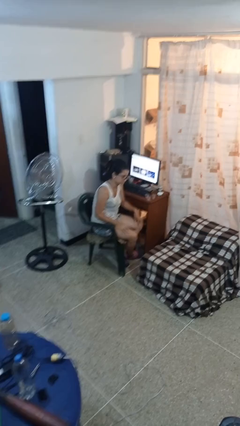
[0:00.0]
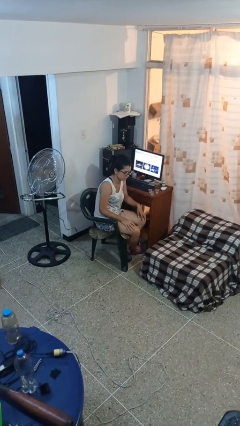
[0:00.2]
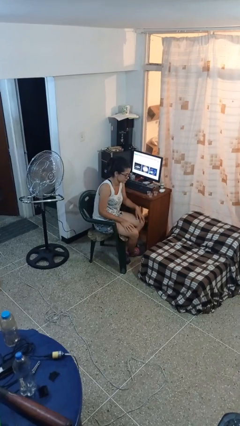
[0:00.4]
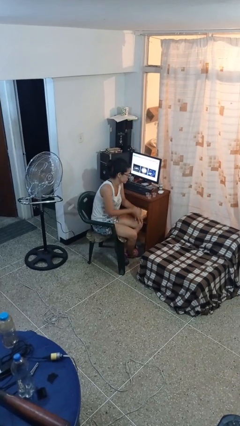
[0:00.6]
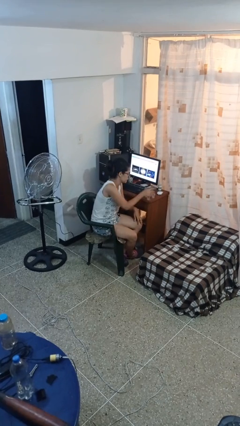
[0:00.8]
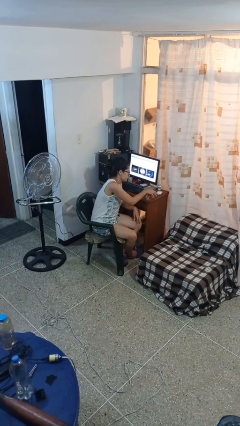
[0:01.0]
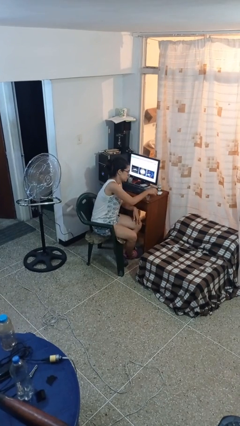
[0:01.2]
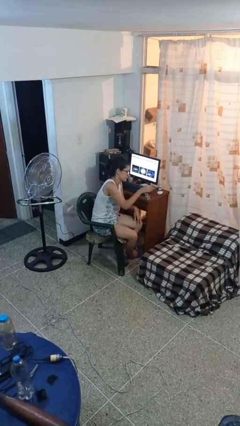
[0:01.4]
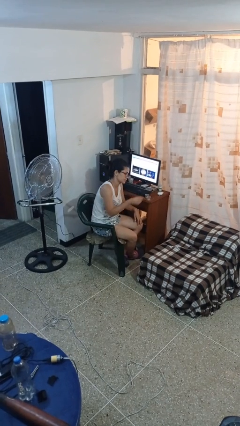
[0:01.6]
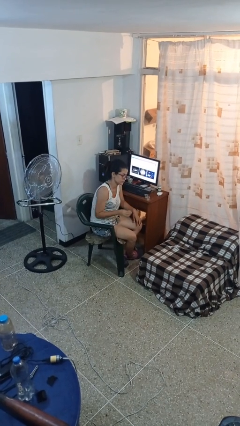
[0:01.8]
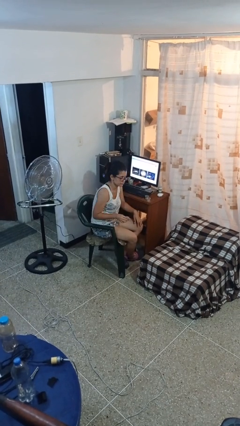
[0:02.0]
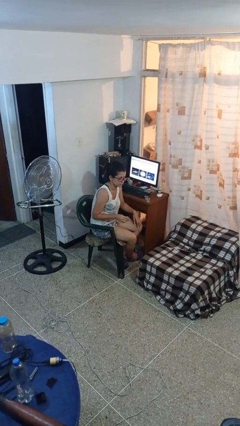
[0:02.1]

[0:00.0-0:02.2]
person picks up object from table

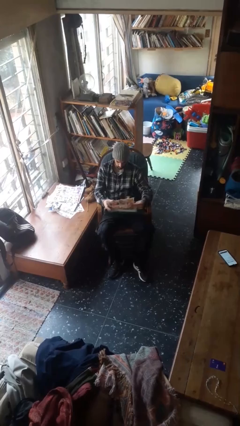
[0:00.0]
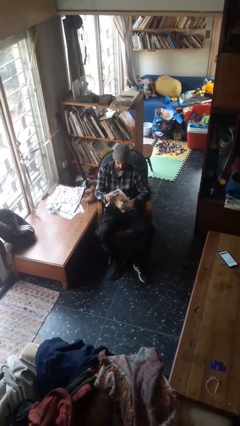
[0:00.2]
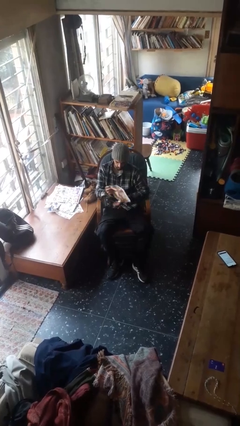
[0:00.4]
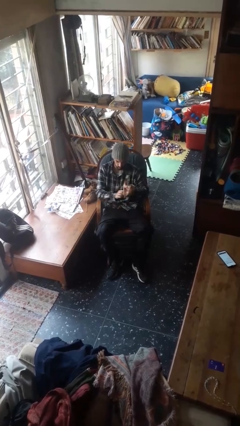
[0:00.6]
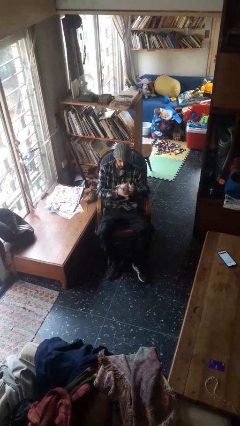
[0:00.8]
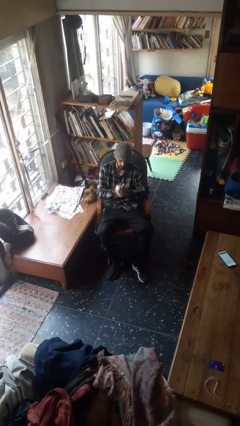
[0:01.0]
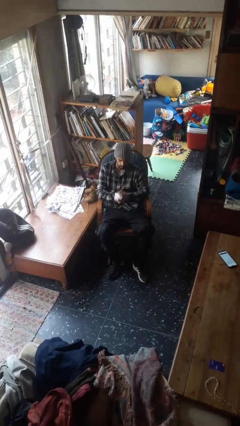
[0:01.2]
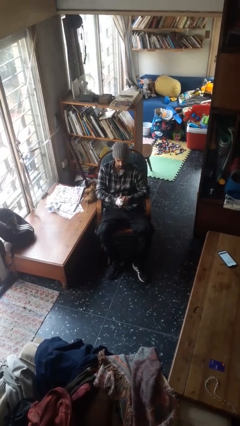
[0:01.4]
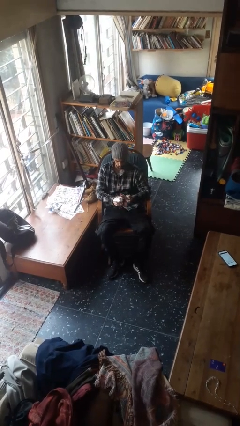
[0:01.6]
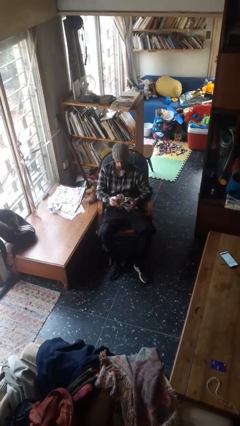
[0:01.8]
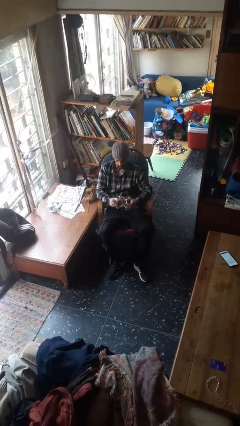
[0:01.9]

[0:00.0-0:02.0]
person crumples paper

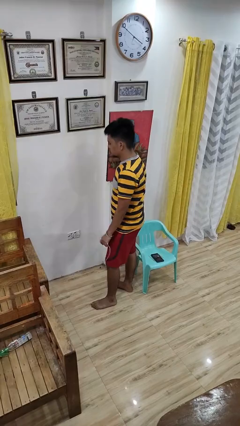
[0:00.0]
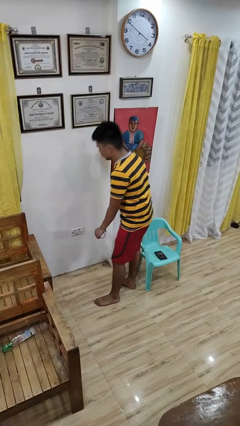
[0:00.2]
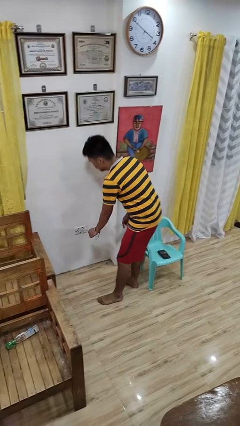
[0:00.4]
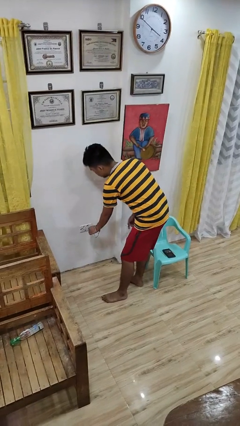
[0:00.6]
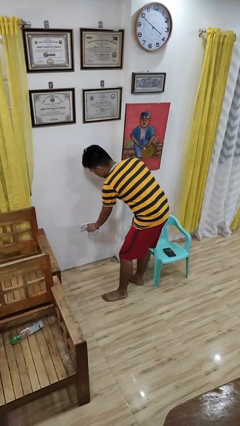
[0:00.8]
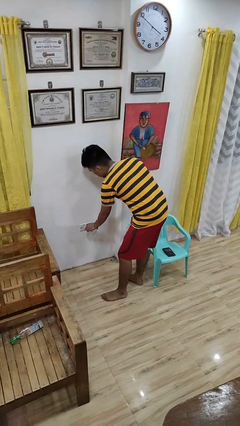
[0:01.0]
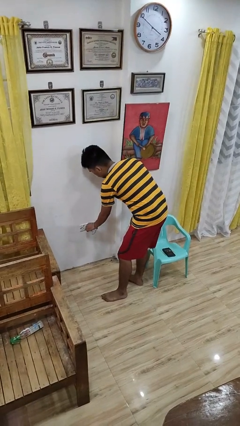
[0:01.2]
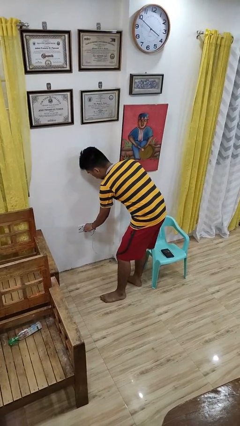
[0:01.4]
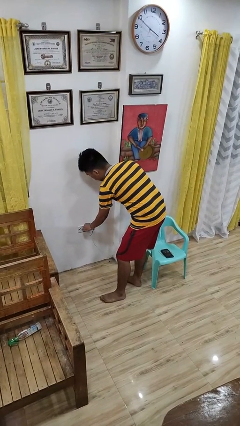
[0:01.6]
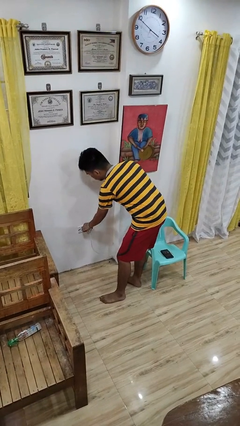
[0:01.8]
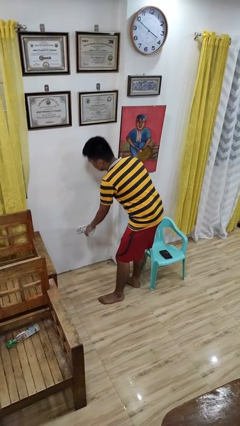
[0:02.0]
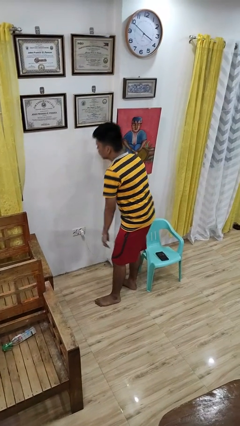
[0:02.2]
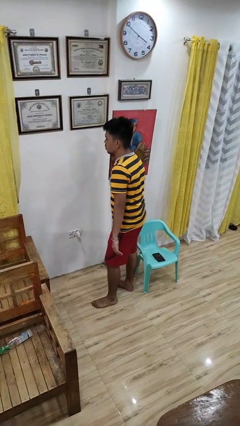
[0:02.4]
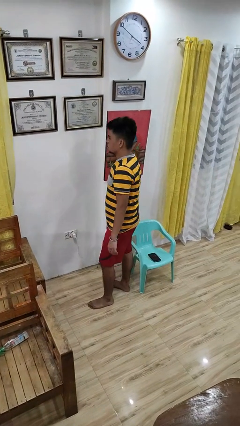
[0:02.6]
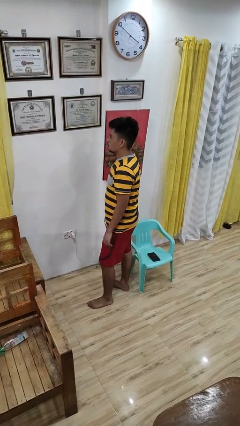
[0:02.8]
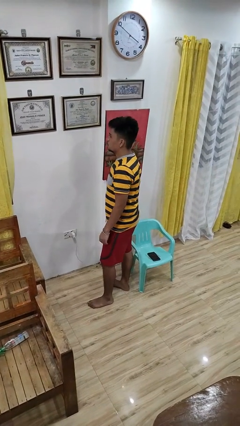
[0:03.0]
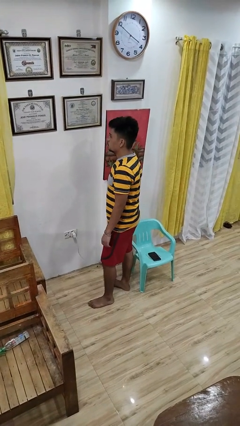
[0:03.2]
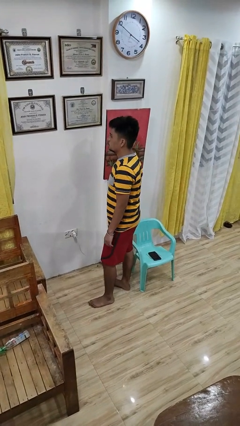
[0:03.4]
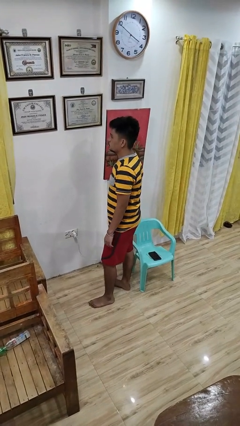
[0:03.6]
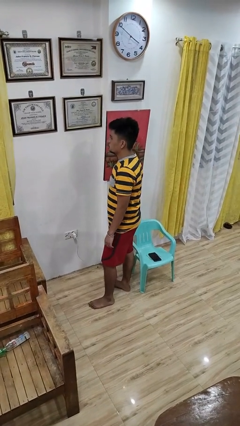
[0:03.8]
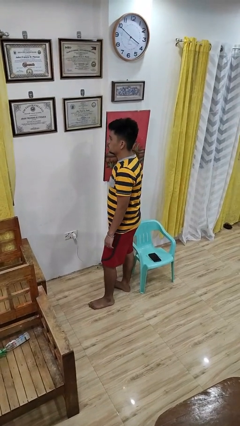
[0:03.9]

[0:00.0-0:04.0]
person plugs into electrical socket

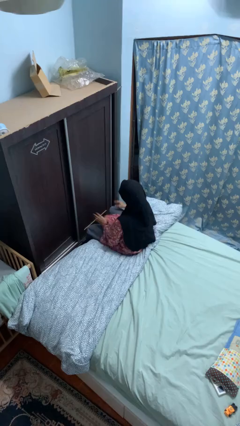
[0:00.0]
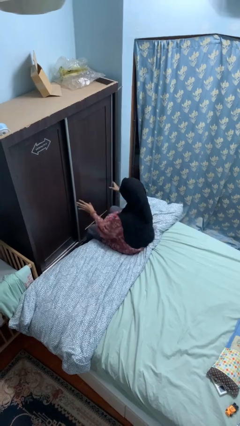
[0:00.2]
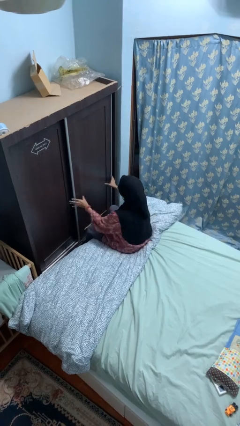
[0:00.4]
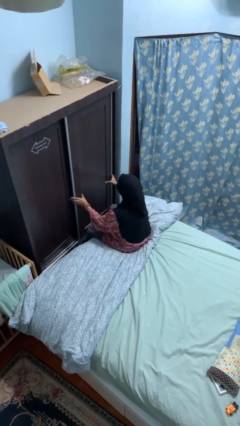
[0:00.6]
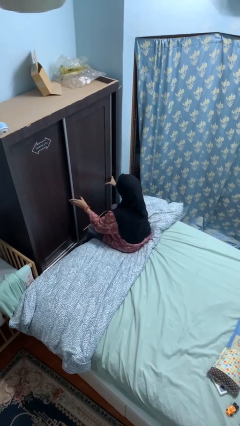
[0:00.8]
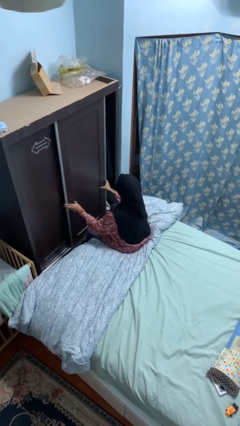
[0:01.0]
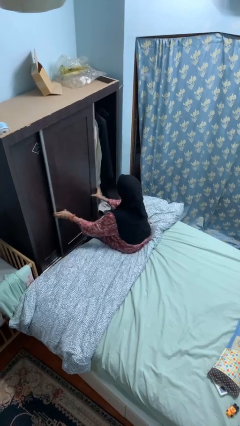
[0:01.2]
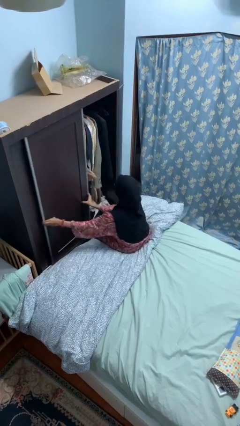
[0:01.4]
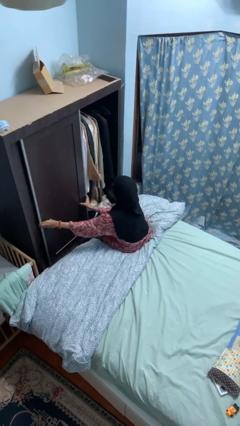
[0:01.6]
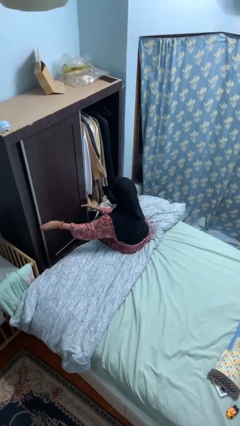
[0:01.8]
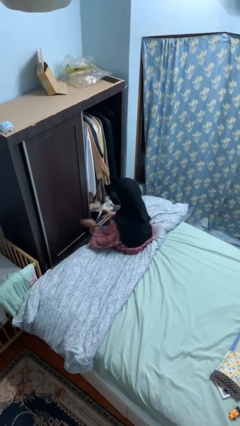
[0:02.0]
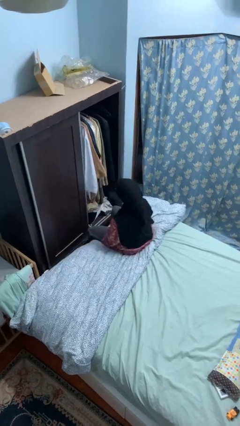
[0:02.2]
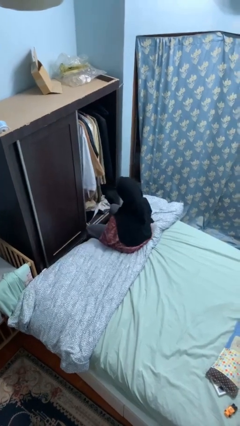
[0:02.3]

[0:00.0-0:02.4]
person opens closet door

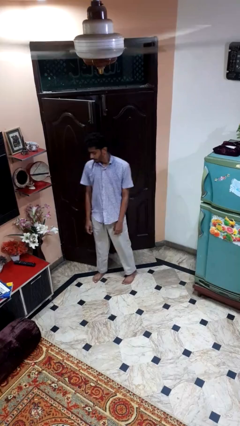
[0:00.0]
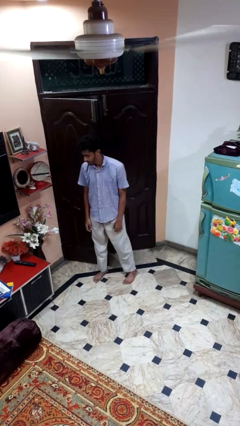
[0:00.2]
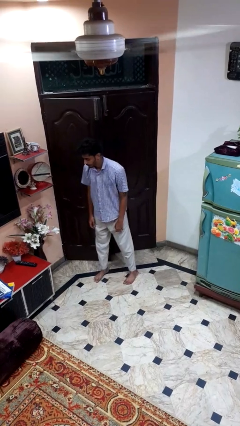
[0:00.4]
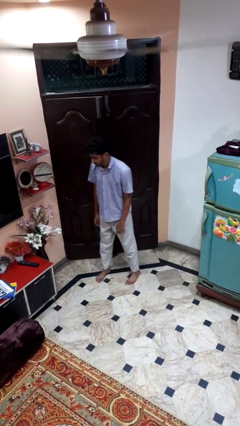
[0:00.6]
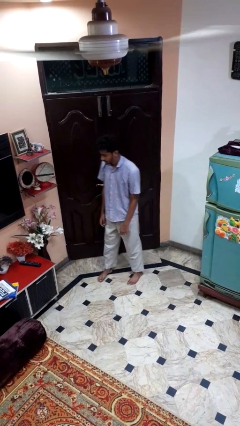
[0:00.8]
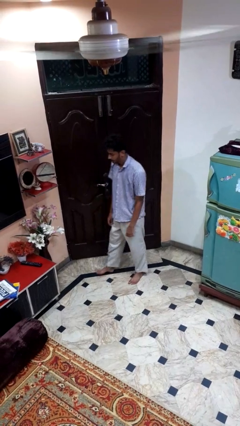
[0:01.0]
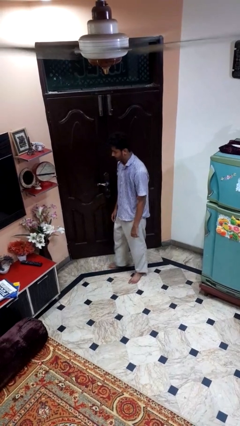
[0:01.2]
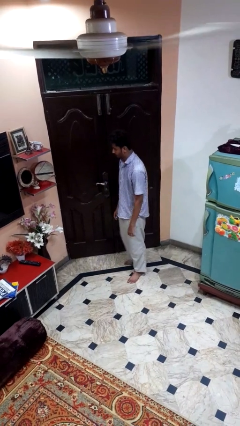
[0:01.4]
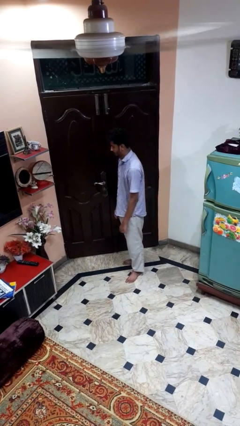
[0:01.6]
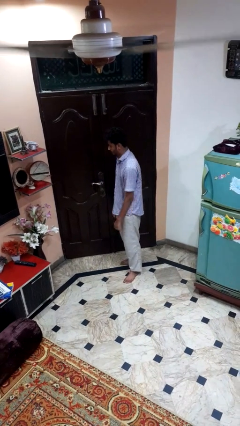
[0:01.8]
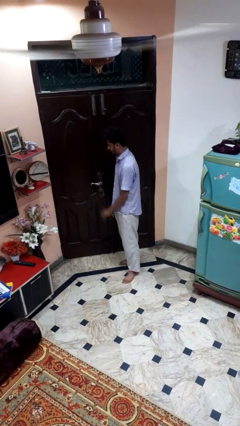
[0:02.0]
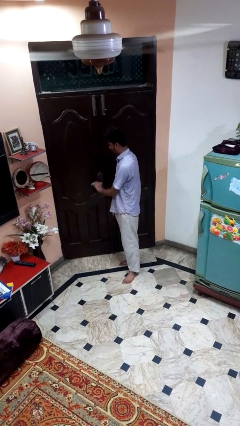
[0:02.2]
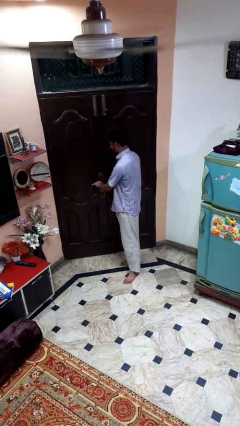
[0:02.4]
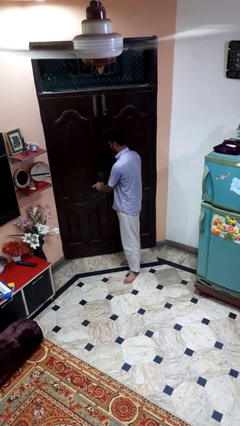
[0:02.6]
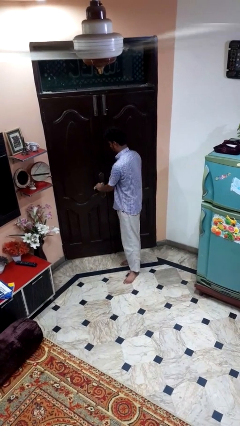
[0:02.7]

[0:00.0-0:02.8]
person closes door with hip

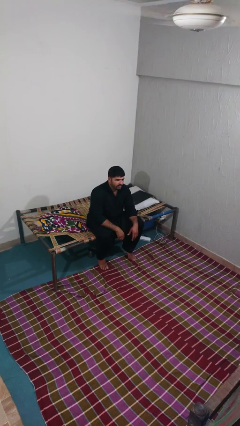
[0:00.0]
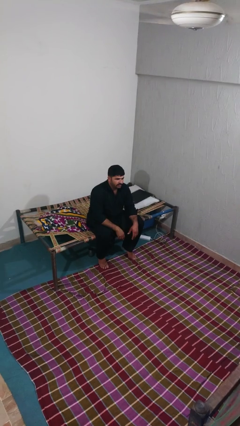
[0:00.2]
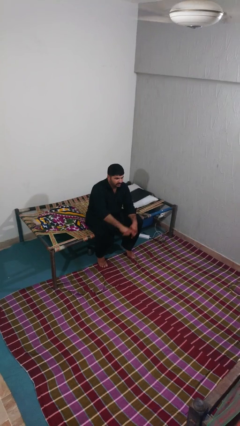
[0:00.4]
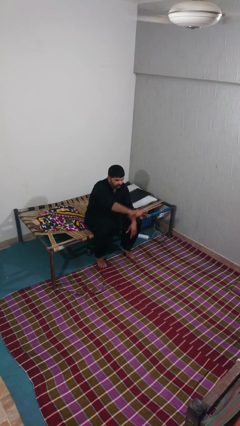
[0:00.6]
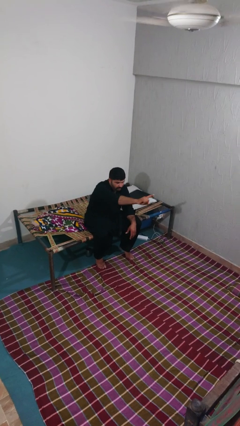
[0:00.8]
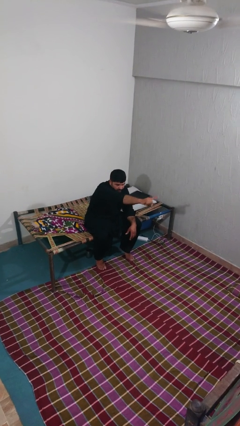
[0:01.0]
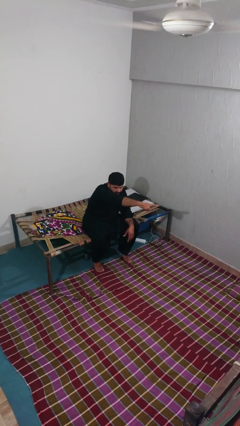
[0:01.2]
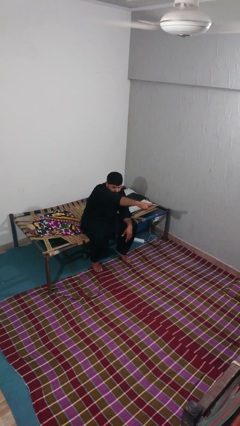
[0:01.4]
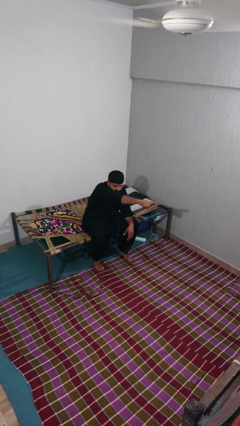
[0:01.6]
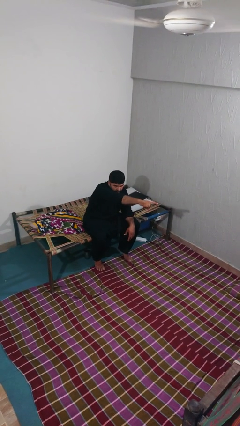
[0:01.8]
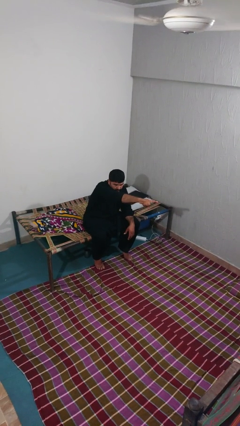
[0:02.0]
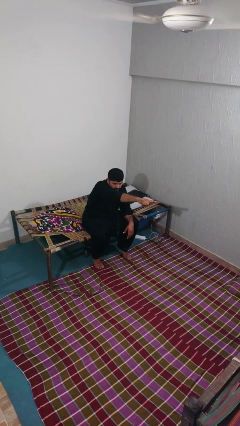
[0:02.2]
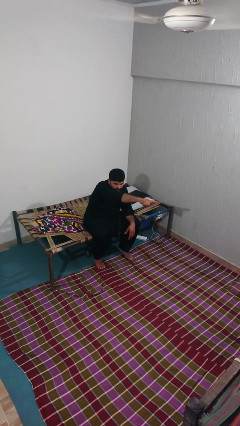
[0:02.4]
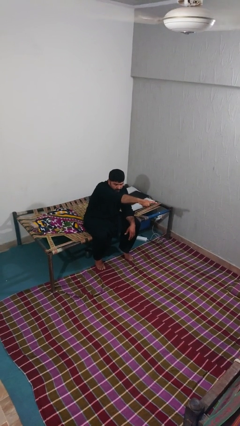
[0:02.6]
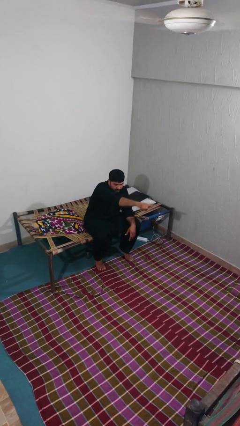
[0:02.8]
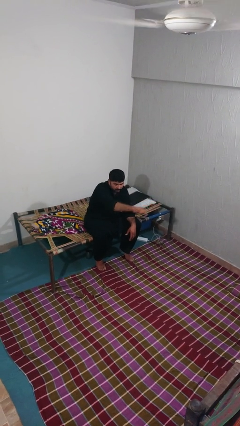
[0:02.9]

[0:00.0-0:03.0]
person points at person

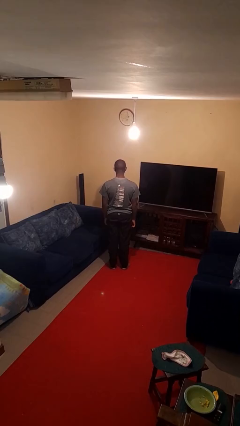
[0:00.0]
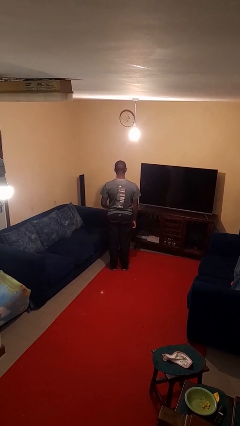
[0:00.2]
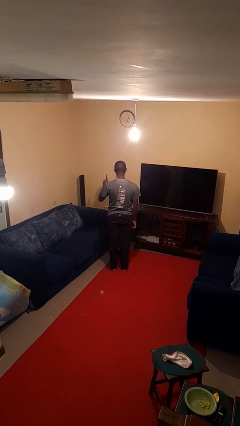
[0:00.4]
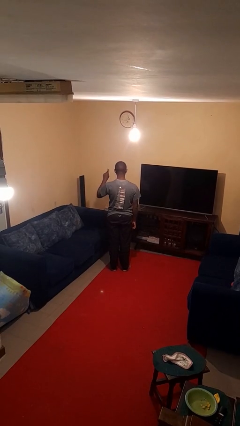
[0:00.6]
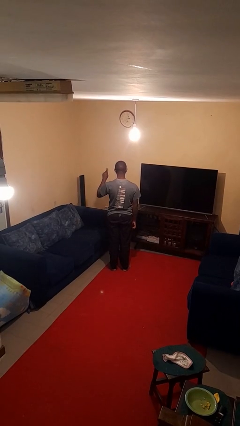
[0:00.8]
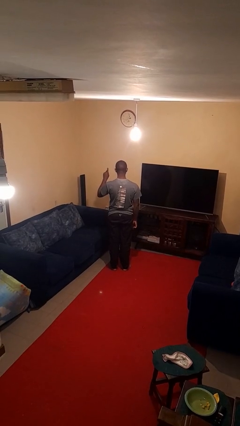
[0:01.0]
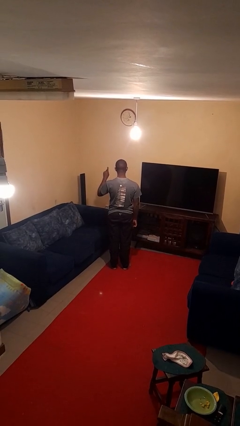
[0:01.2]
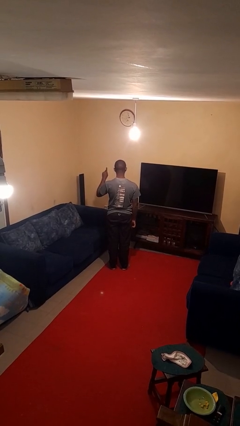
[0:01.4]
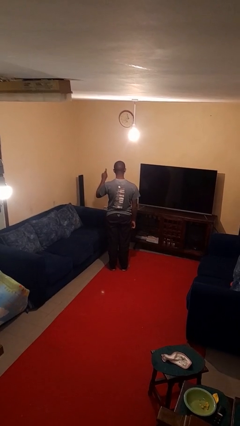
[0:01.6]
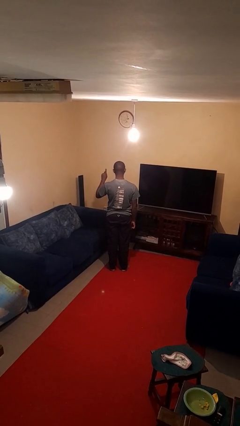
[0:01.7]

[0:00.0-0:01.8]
person gestures number one
